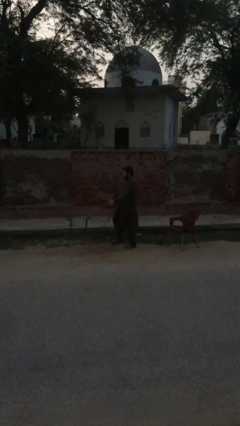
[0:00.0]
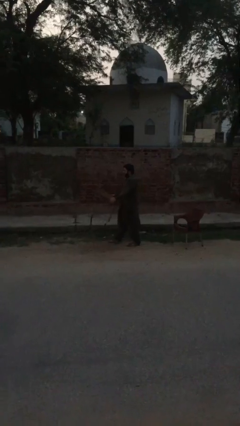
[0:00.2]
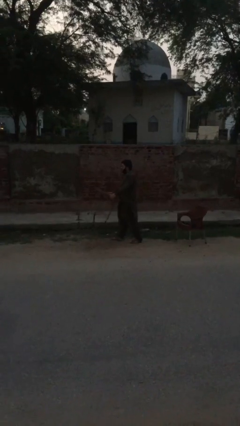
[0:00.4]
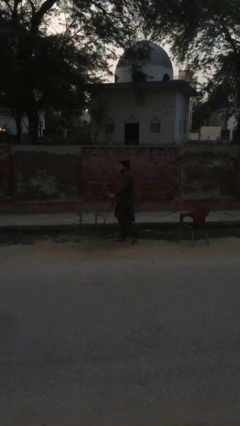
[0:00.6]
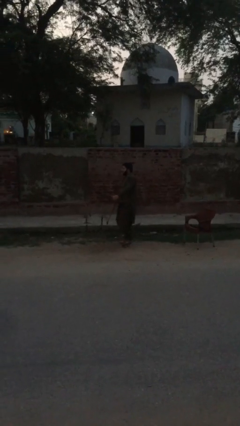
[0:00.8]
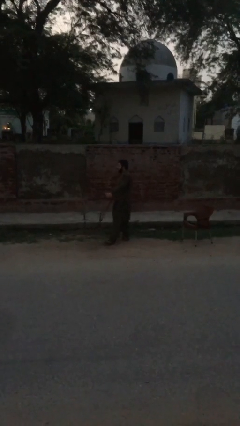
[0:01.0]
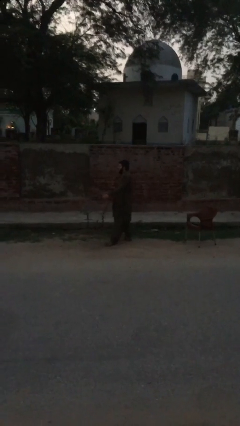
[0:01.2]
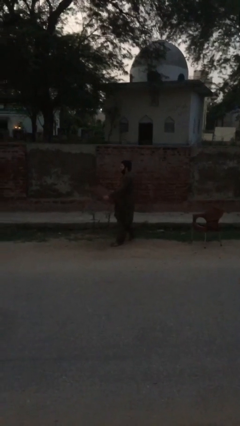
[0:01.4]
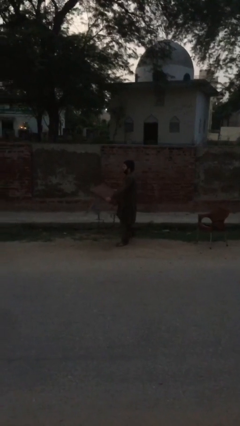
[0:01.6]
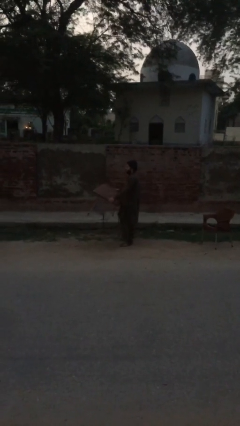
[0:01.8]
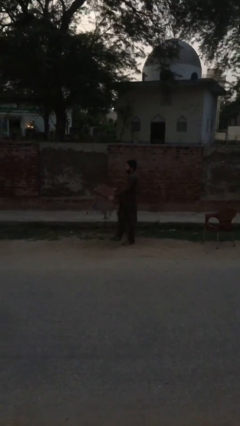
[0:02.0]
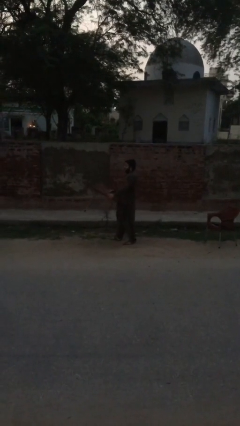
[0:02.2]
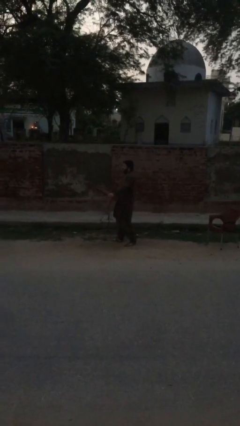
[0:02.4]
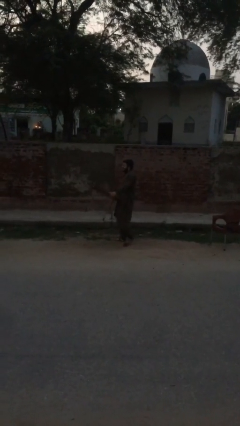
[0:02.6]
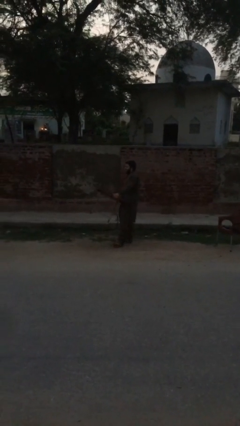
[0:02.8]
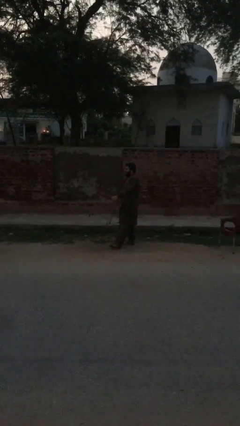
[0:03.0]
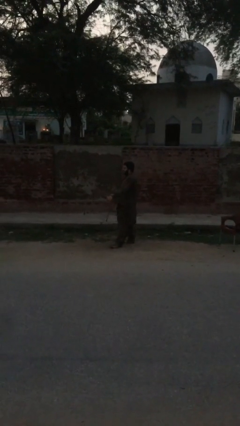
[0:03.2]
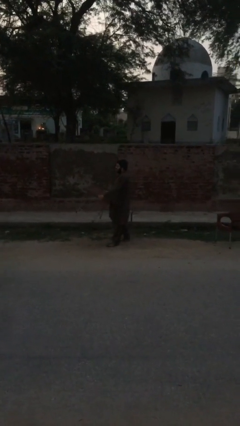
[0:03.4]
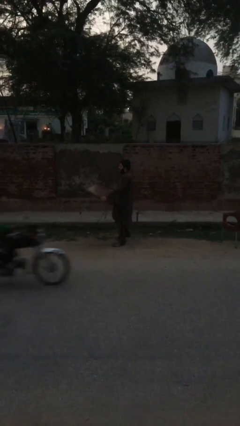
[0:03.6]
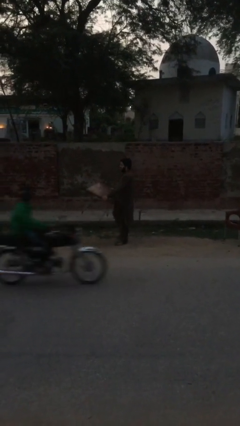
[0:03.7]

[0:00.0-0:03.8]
person carries heavy object

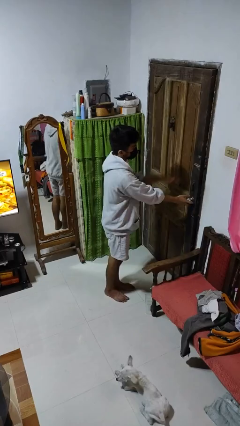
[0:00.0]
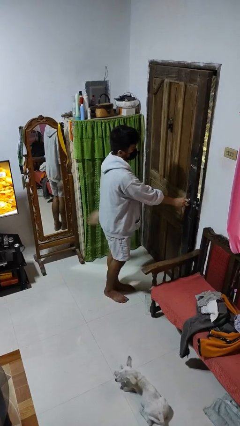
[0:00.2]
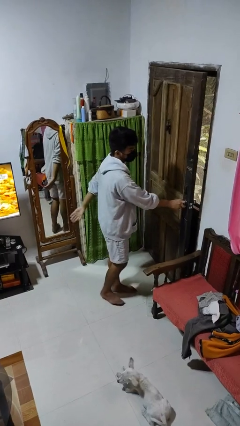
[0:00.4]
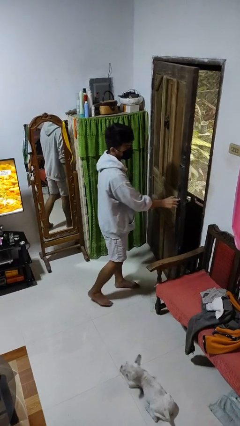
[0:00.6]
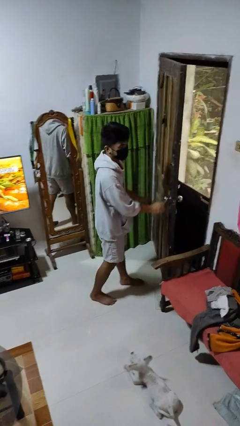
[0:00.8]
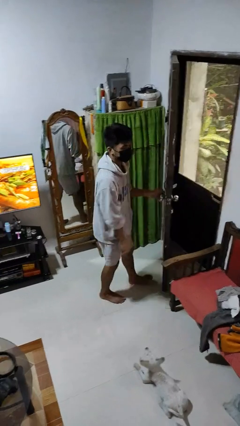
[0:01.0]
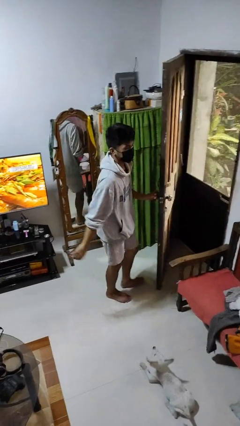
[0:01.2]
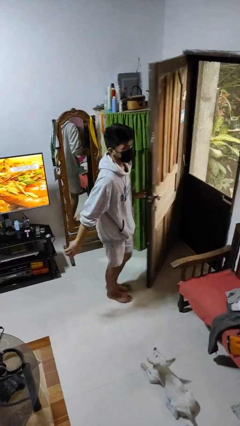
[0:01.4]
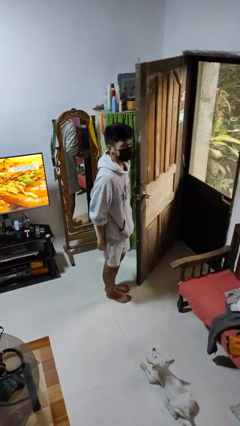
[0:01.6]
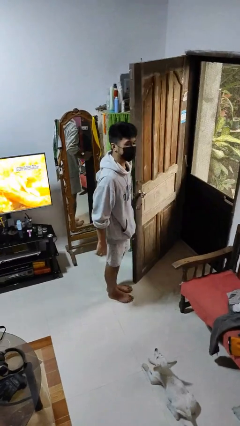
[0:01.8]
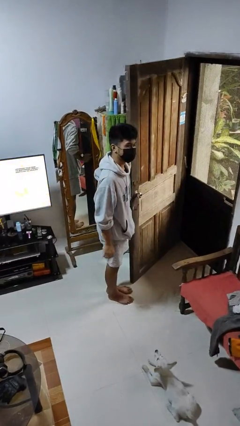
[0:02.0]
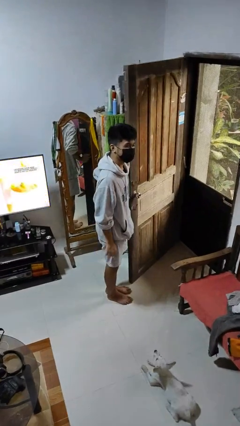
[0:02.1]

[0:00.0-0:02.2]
person opens facility door

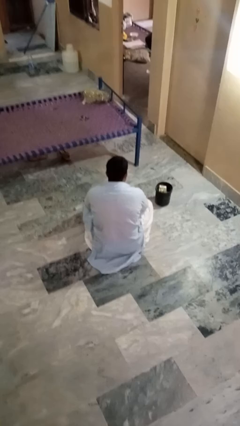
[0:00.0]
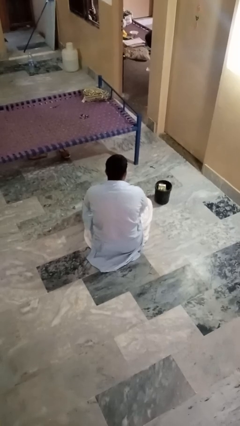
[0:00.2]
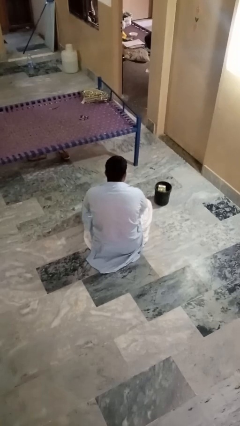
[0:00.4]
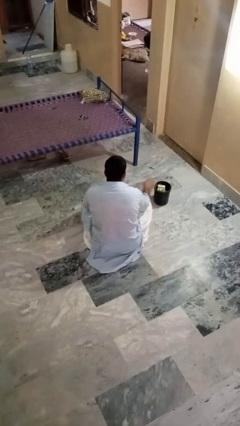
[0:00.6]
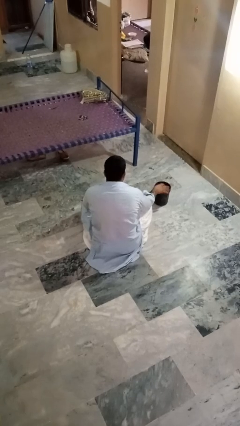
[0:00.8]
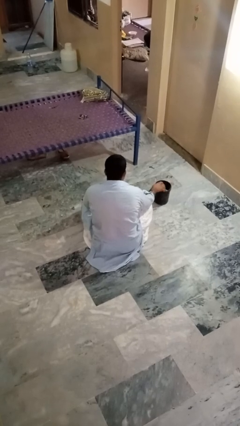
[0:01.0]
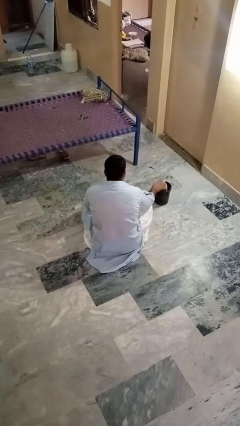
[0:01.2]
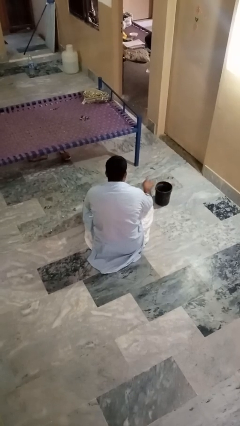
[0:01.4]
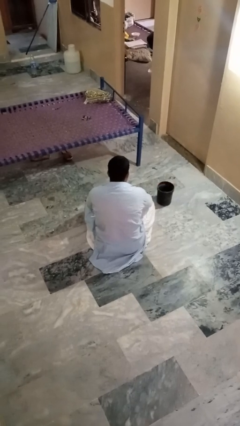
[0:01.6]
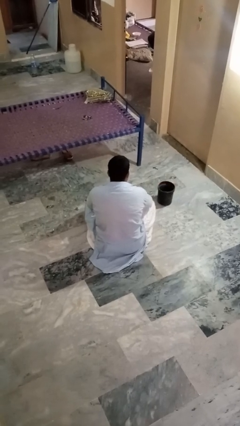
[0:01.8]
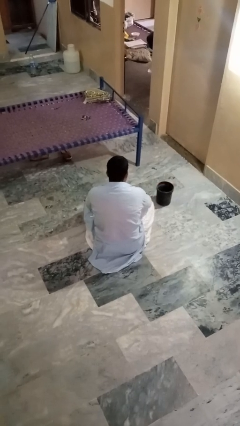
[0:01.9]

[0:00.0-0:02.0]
person takes object from basket

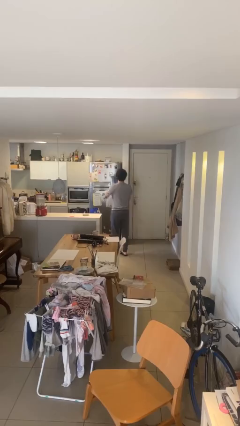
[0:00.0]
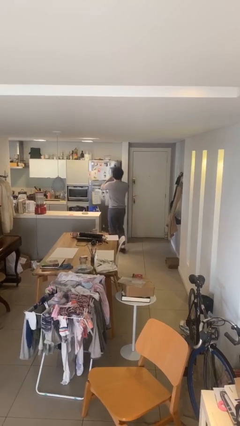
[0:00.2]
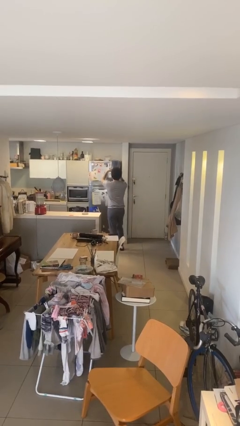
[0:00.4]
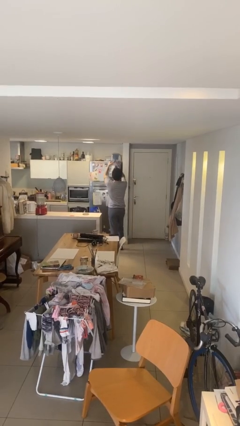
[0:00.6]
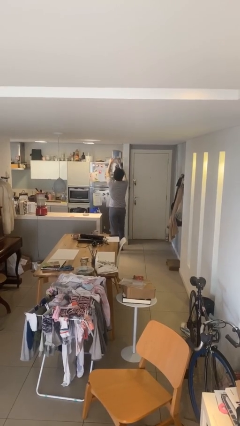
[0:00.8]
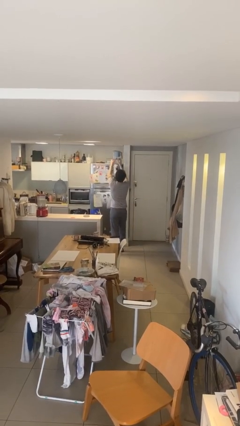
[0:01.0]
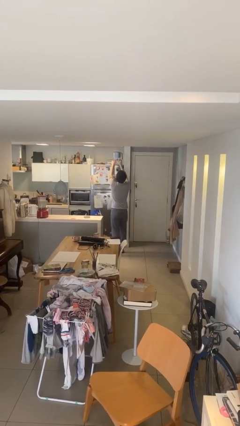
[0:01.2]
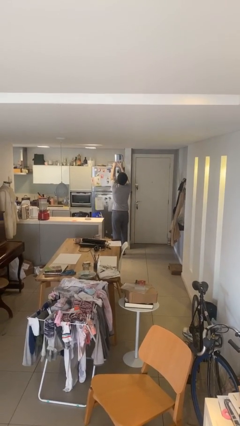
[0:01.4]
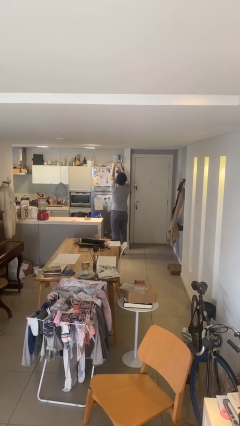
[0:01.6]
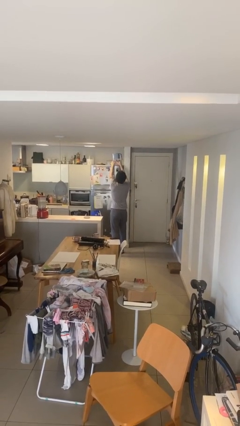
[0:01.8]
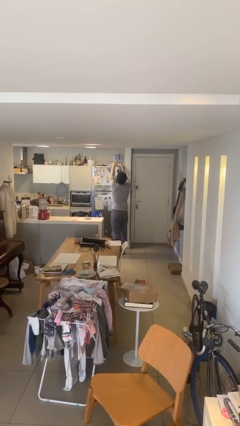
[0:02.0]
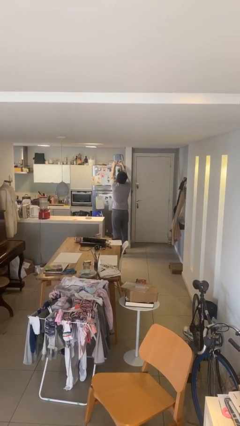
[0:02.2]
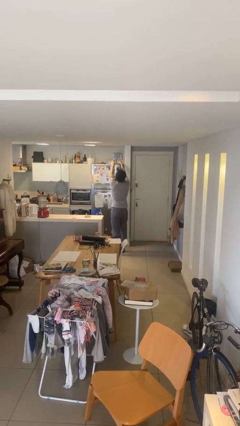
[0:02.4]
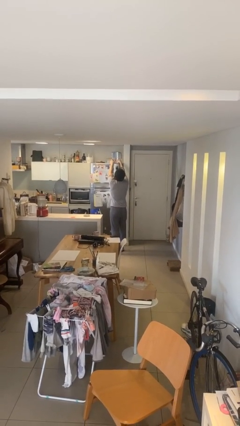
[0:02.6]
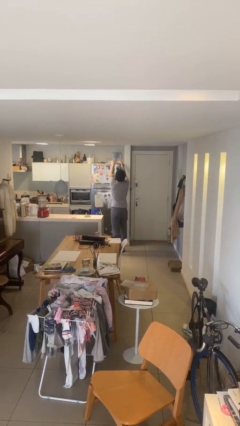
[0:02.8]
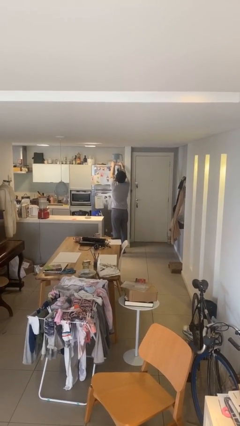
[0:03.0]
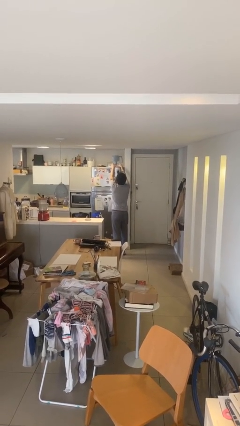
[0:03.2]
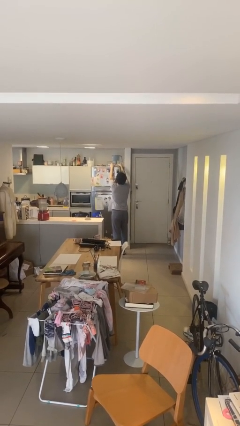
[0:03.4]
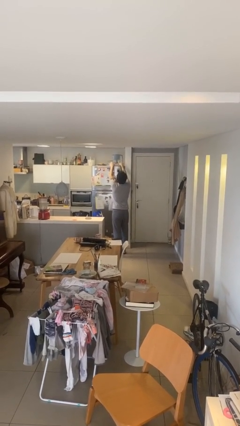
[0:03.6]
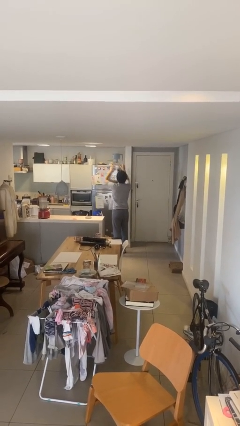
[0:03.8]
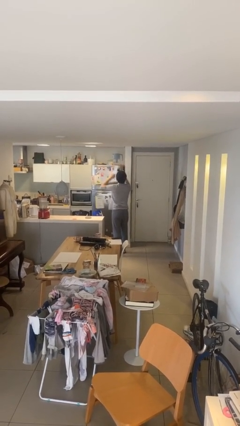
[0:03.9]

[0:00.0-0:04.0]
person puts down object on shelf

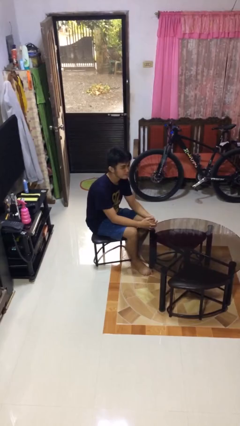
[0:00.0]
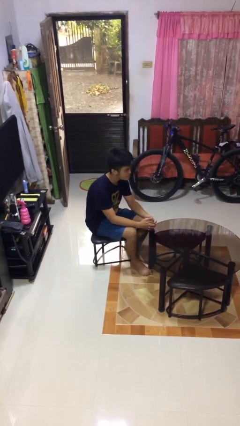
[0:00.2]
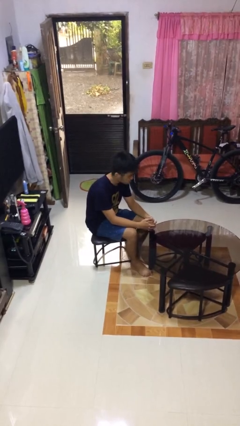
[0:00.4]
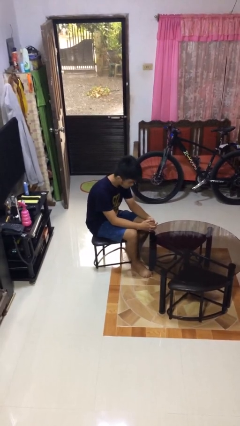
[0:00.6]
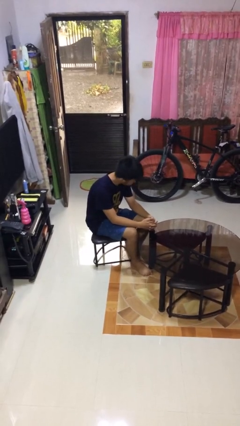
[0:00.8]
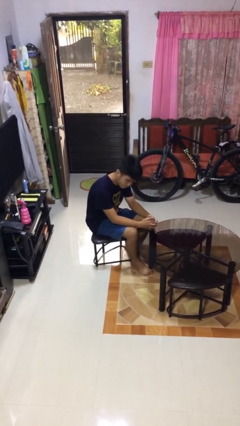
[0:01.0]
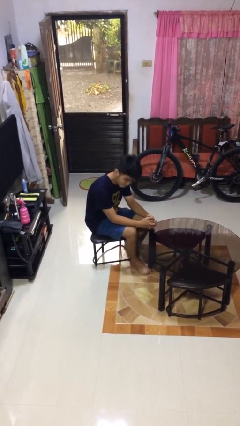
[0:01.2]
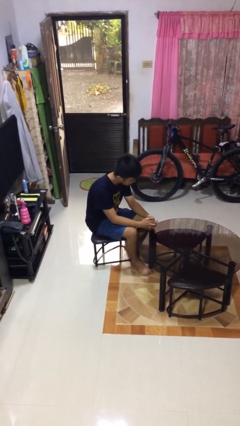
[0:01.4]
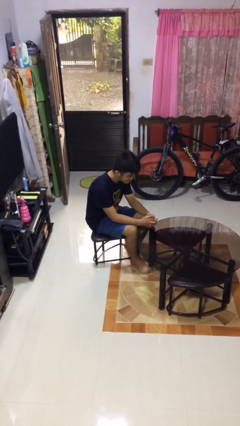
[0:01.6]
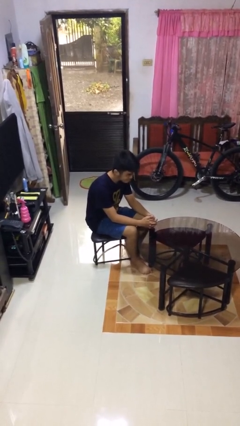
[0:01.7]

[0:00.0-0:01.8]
person shakes head

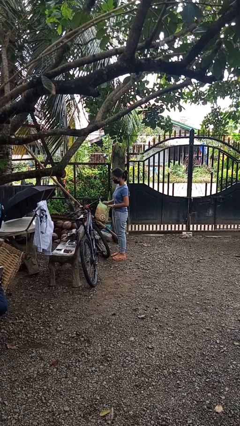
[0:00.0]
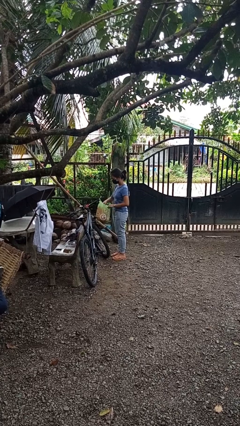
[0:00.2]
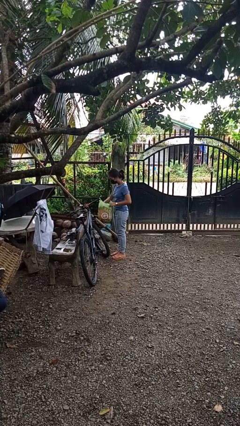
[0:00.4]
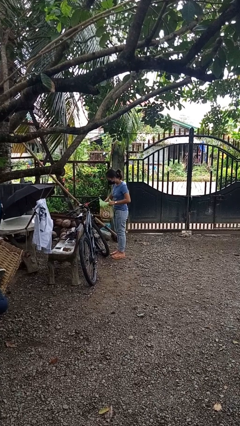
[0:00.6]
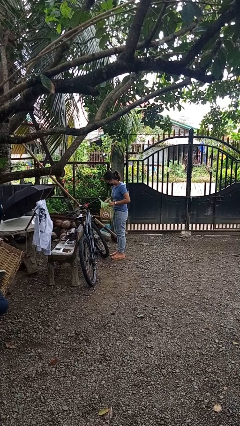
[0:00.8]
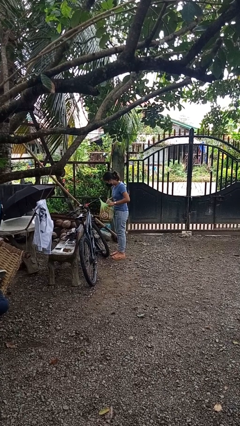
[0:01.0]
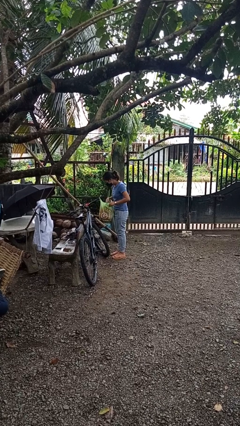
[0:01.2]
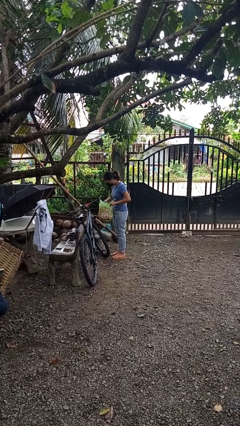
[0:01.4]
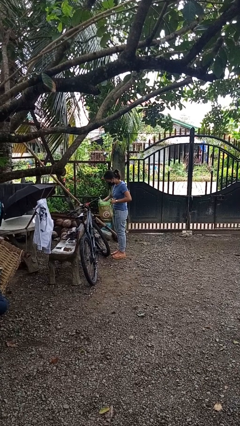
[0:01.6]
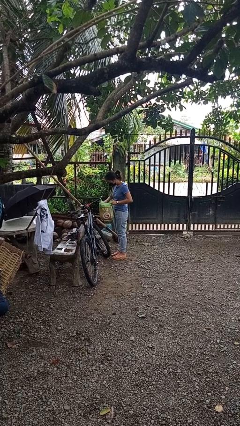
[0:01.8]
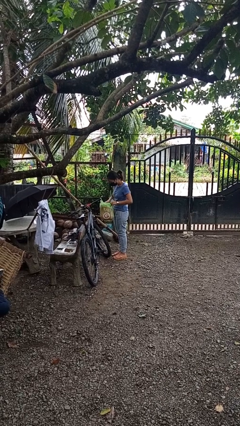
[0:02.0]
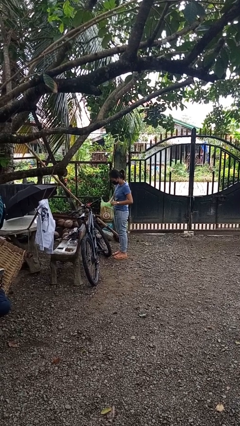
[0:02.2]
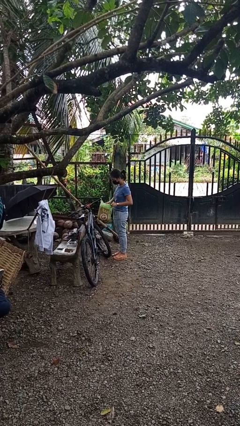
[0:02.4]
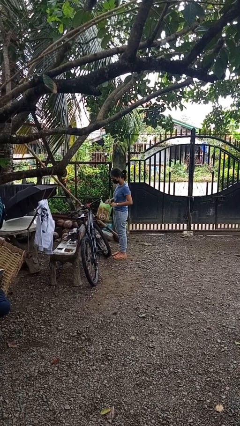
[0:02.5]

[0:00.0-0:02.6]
person searches in bag

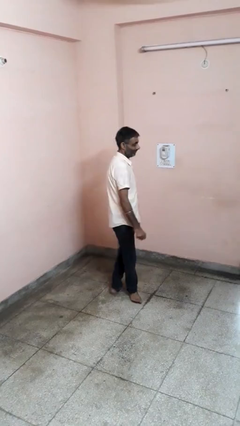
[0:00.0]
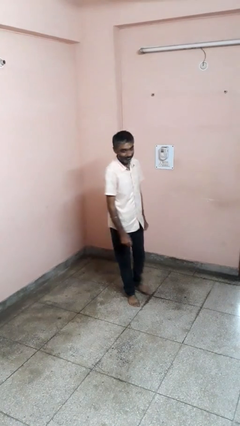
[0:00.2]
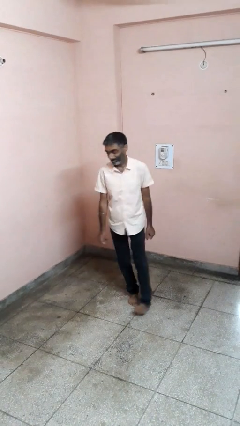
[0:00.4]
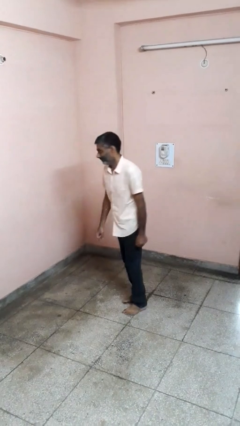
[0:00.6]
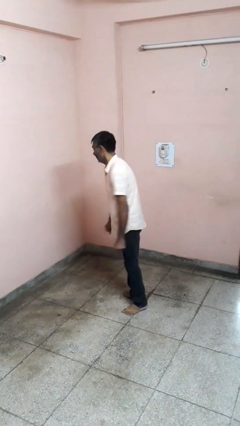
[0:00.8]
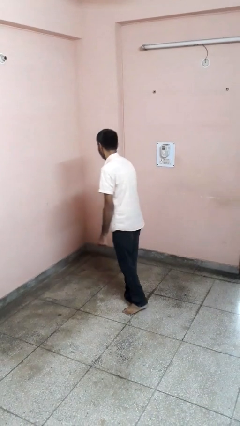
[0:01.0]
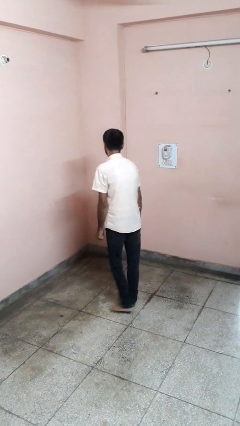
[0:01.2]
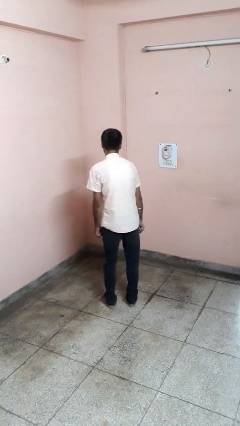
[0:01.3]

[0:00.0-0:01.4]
person twirls
